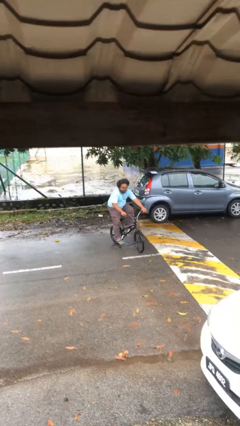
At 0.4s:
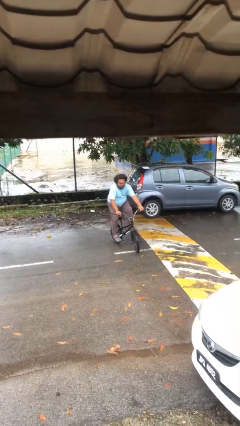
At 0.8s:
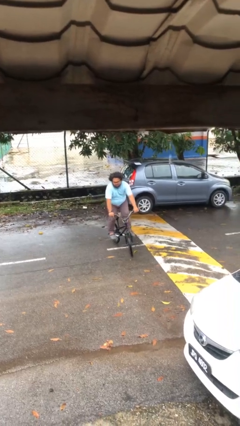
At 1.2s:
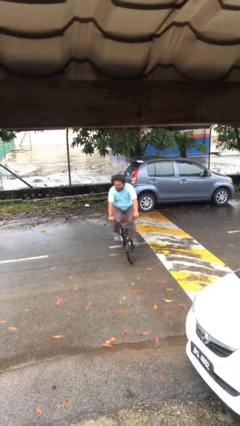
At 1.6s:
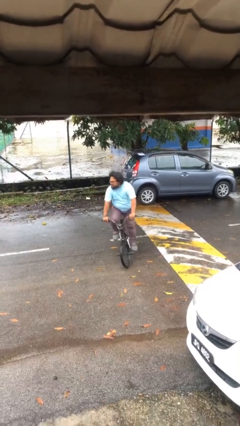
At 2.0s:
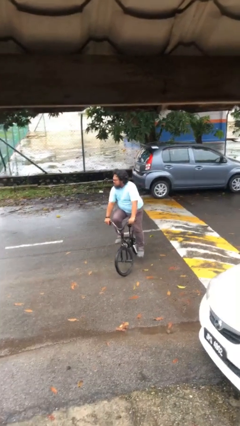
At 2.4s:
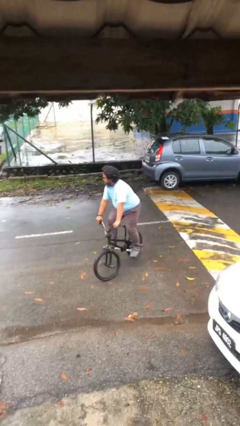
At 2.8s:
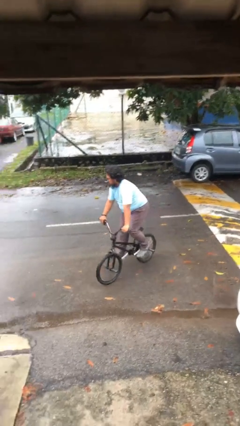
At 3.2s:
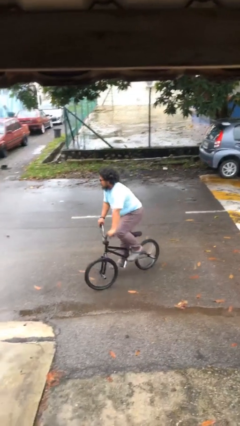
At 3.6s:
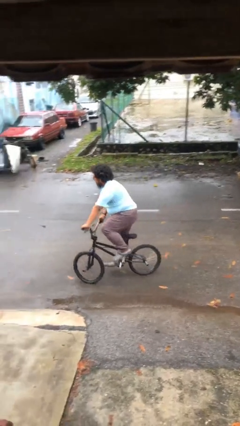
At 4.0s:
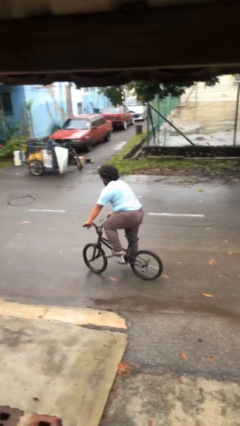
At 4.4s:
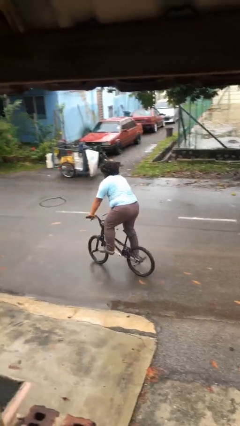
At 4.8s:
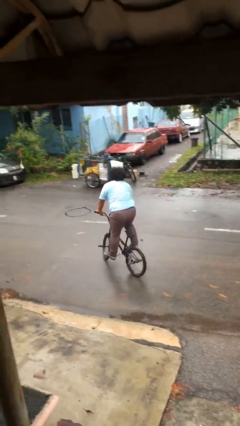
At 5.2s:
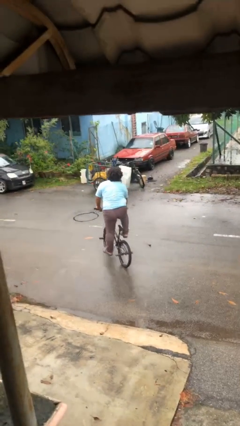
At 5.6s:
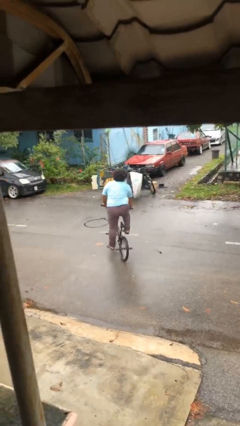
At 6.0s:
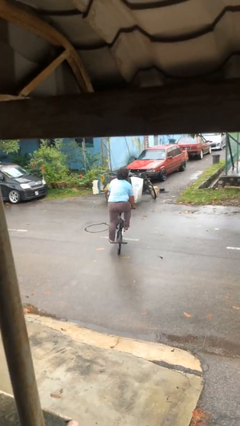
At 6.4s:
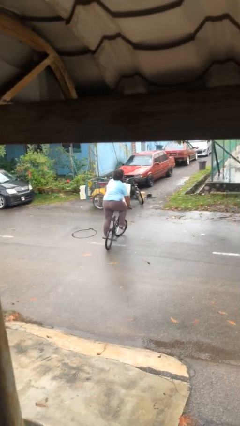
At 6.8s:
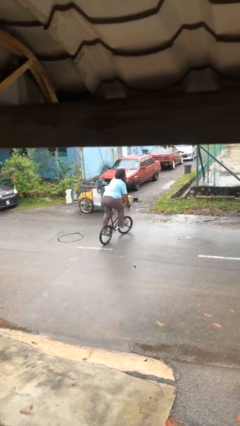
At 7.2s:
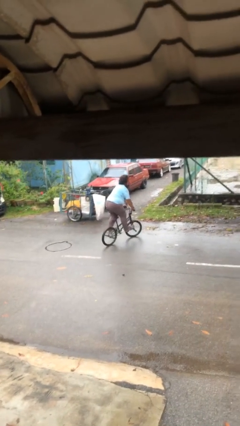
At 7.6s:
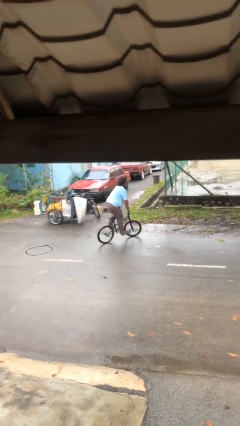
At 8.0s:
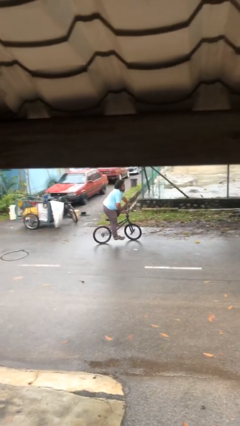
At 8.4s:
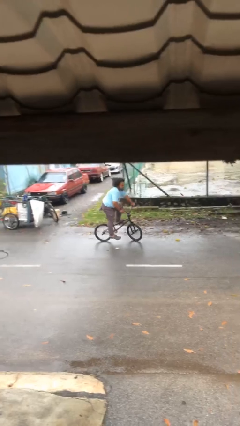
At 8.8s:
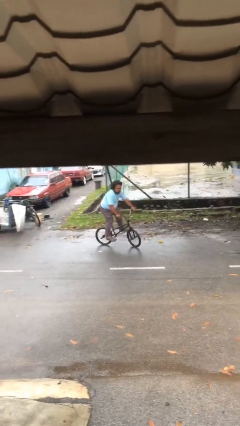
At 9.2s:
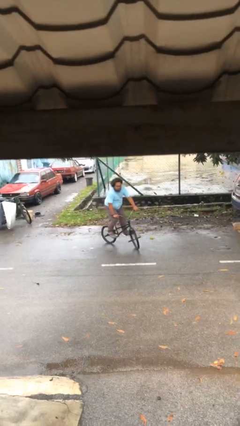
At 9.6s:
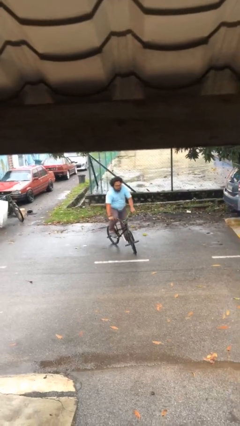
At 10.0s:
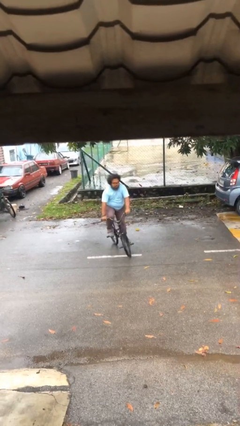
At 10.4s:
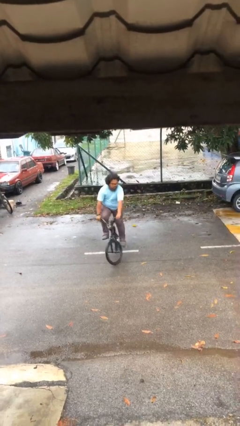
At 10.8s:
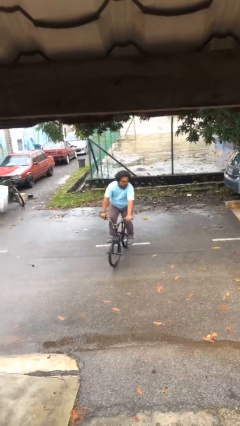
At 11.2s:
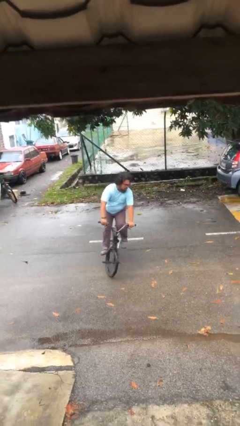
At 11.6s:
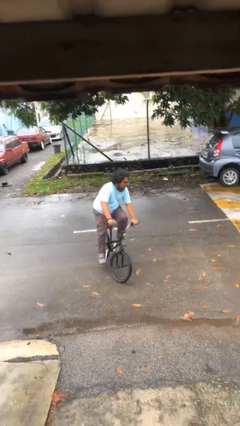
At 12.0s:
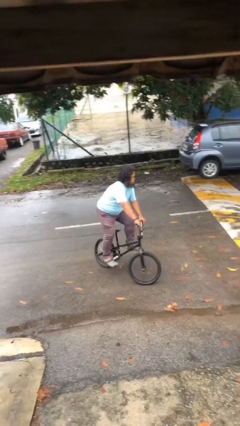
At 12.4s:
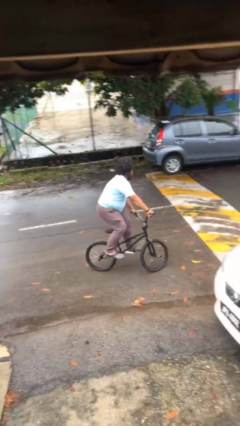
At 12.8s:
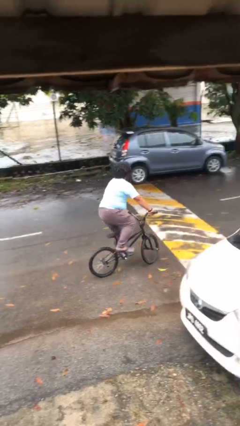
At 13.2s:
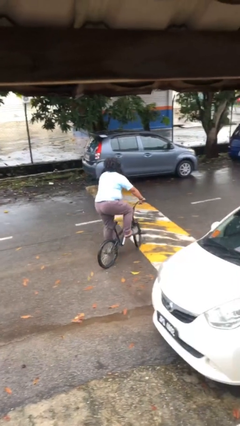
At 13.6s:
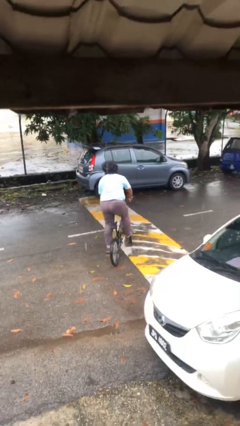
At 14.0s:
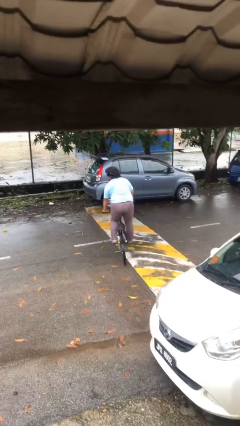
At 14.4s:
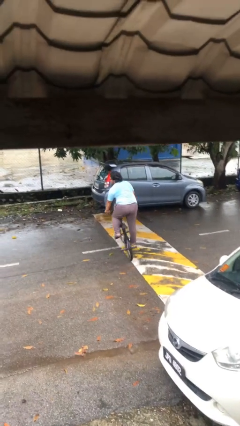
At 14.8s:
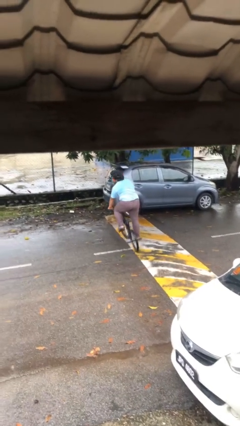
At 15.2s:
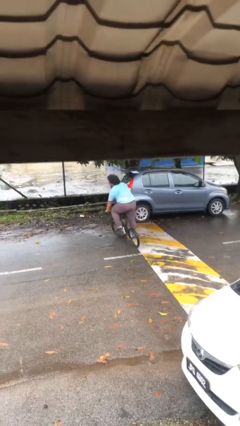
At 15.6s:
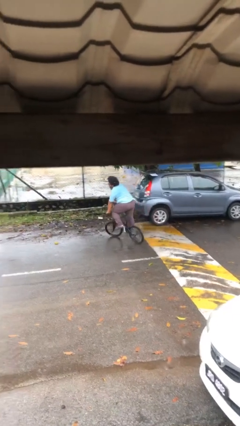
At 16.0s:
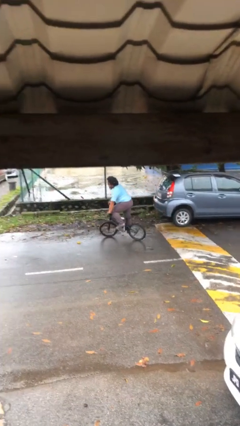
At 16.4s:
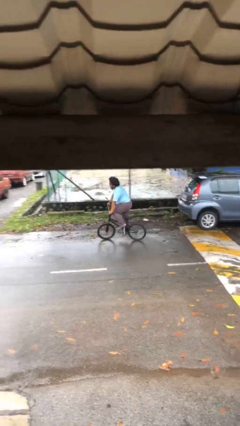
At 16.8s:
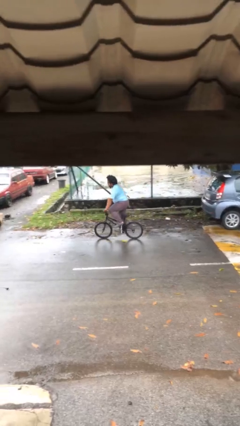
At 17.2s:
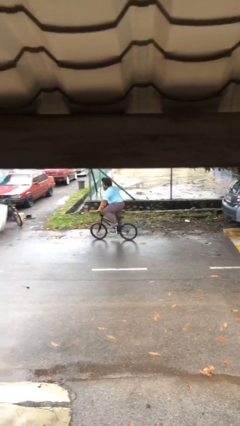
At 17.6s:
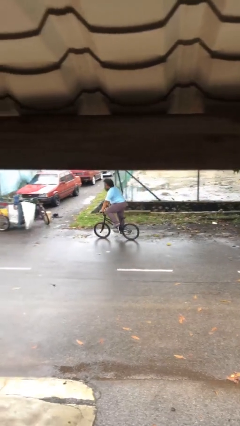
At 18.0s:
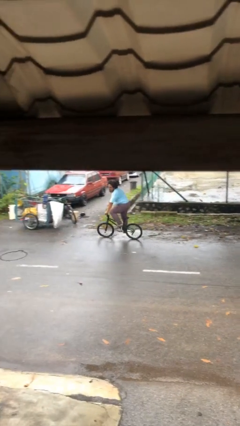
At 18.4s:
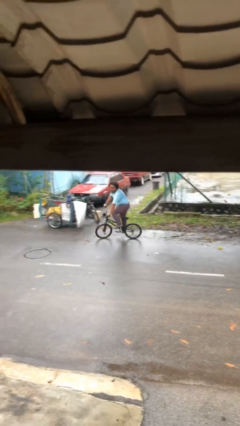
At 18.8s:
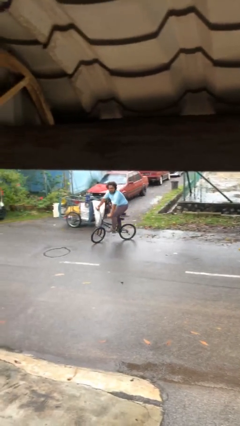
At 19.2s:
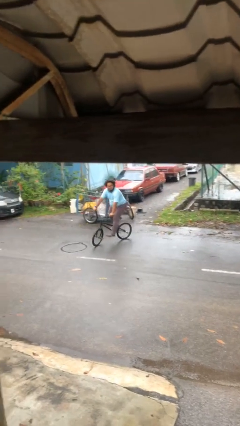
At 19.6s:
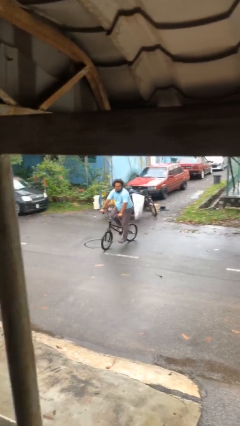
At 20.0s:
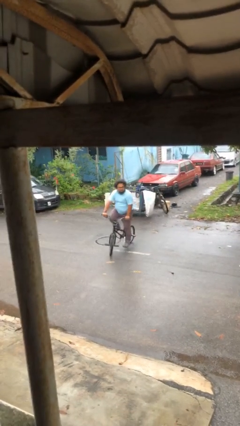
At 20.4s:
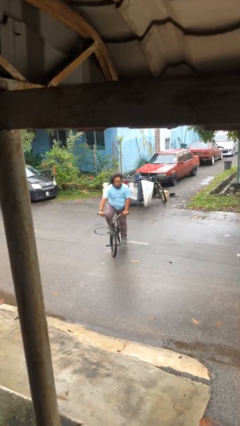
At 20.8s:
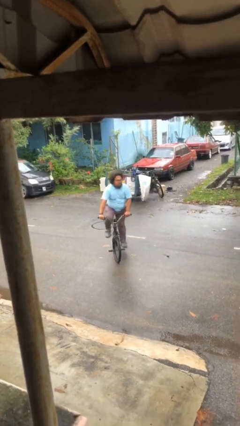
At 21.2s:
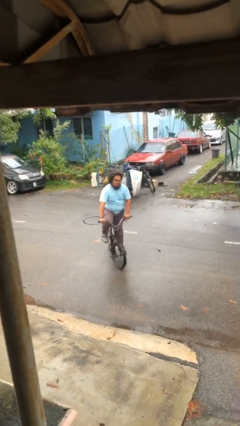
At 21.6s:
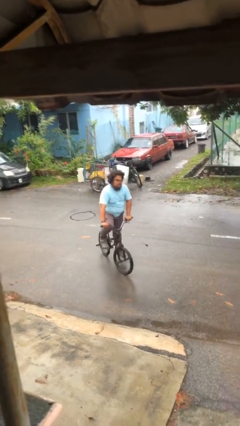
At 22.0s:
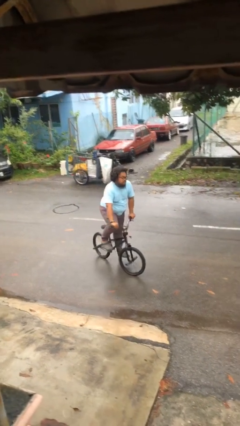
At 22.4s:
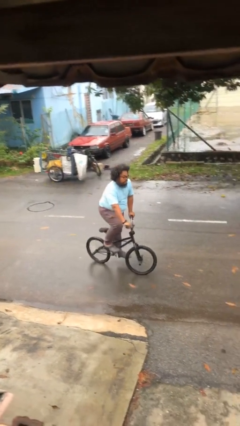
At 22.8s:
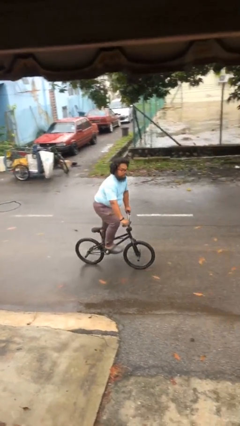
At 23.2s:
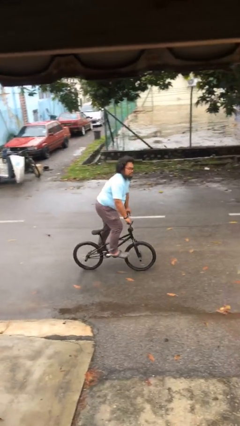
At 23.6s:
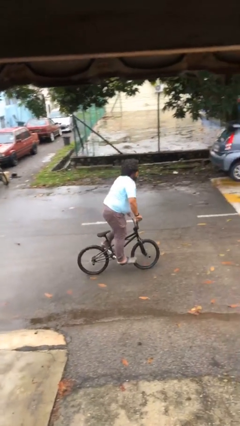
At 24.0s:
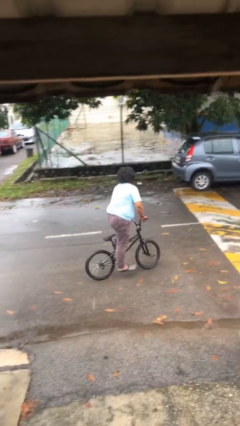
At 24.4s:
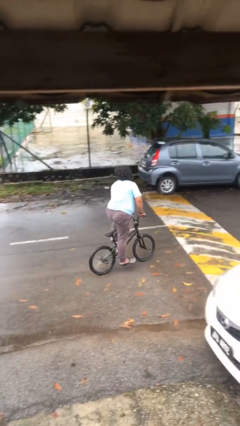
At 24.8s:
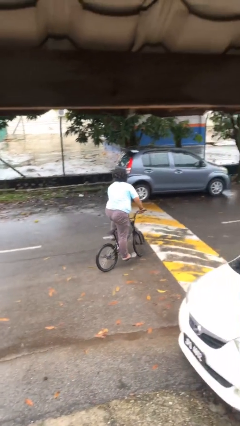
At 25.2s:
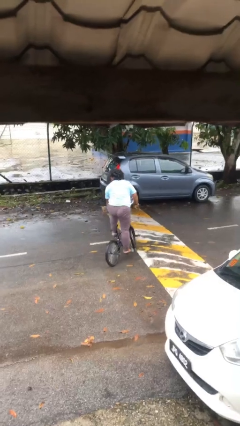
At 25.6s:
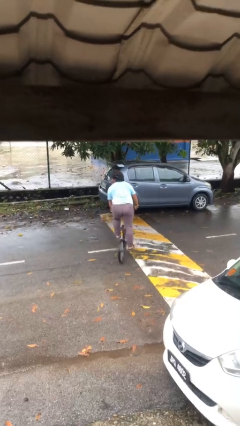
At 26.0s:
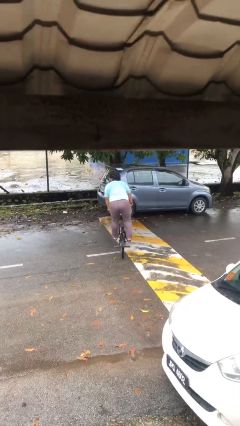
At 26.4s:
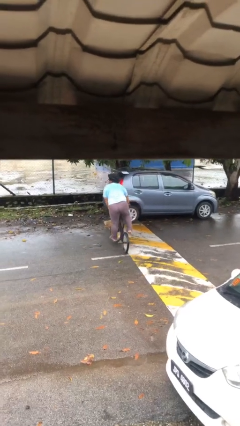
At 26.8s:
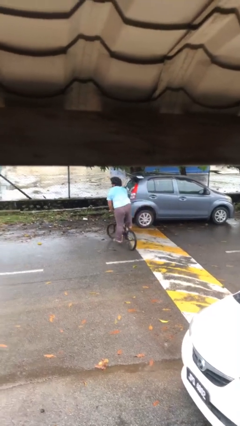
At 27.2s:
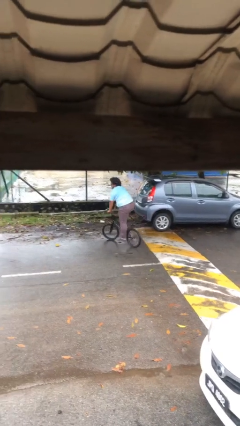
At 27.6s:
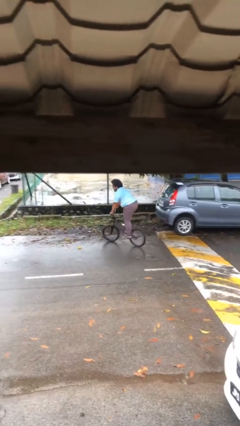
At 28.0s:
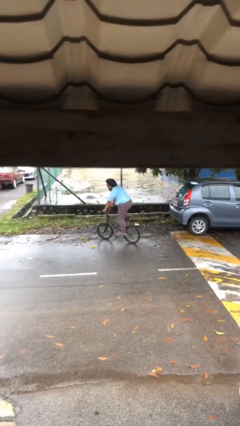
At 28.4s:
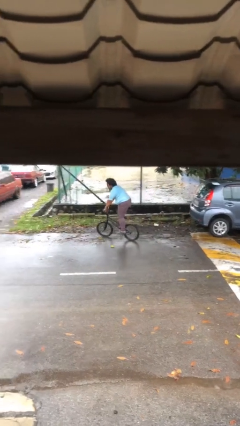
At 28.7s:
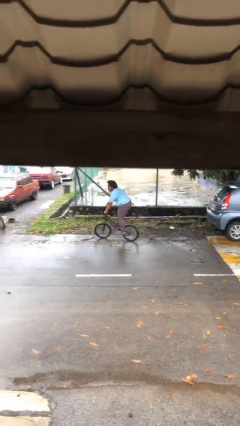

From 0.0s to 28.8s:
person rides bicycle

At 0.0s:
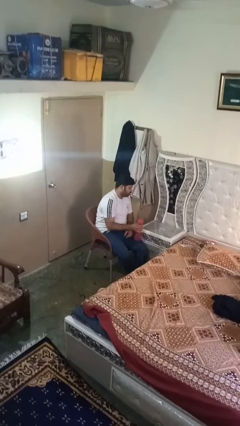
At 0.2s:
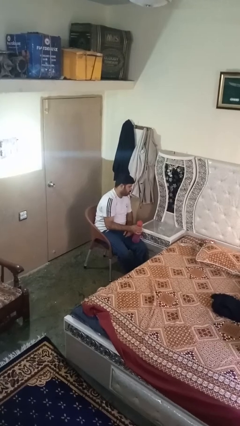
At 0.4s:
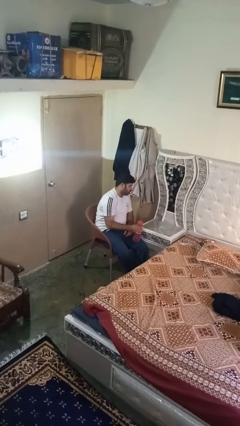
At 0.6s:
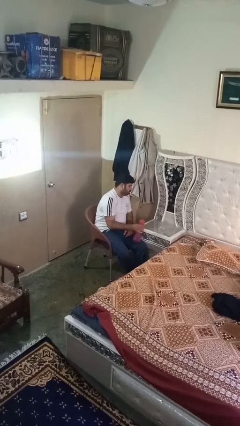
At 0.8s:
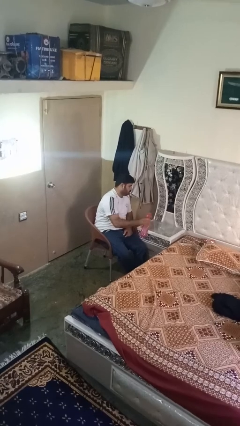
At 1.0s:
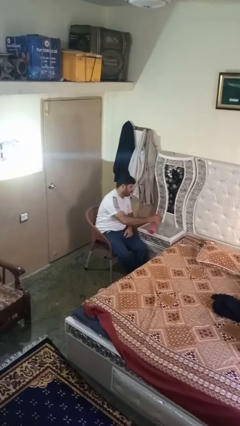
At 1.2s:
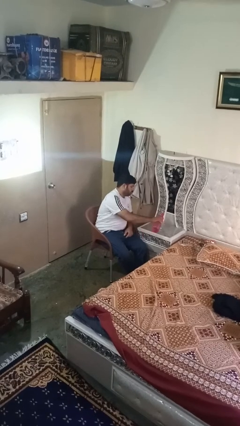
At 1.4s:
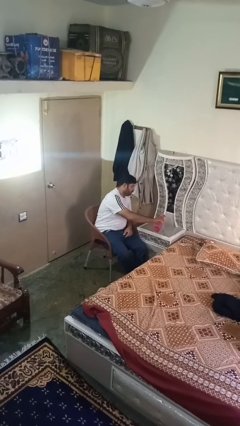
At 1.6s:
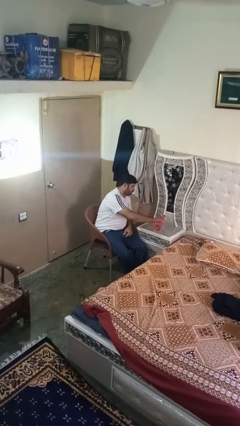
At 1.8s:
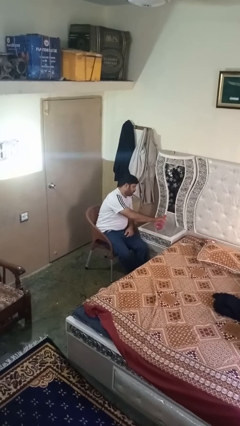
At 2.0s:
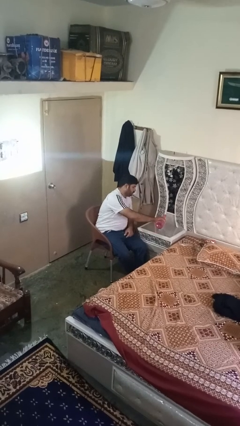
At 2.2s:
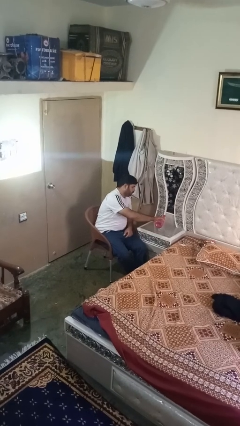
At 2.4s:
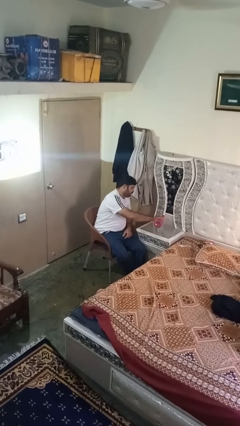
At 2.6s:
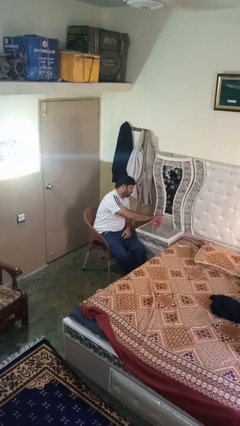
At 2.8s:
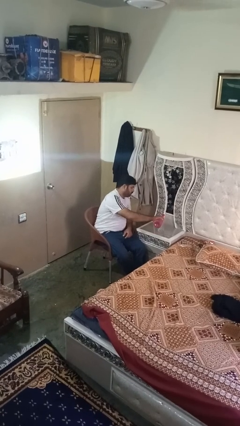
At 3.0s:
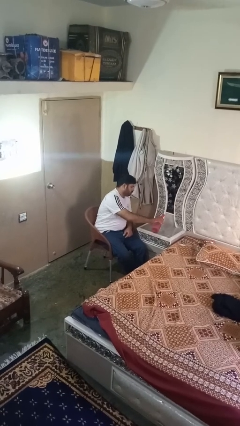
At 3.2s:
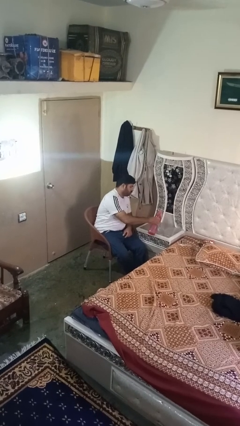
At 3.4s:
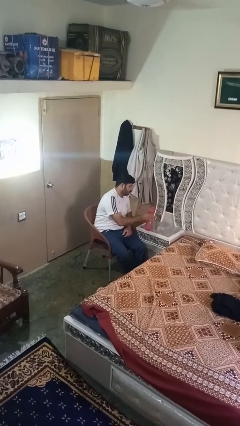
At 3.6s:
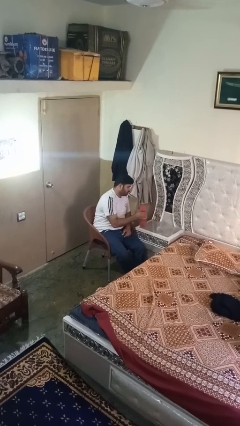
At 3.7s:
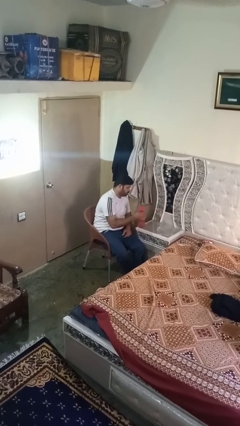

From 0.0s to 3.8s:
person pours liquid into cup
